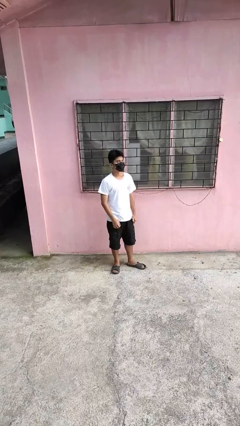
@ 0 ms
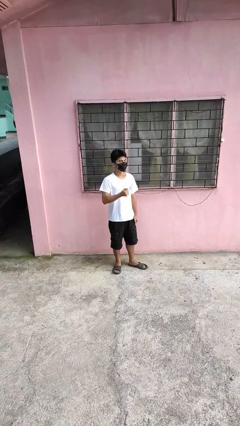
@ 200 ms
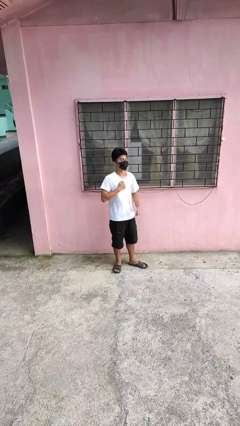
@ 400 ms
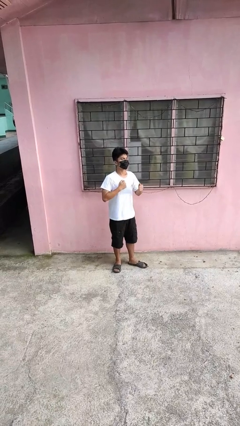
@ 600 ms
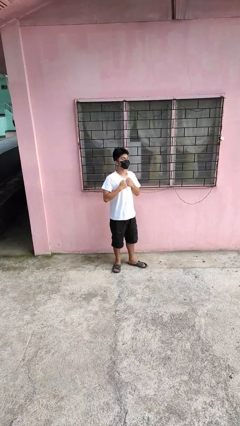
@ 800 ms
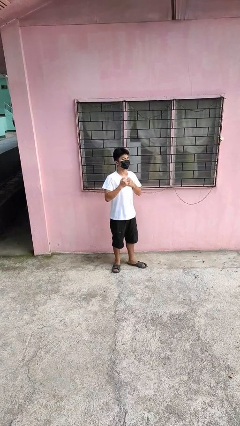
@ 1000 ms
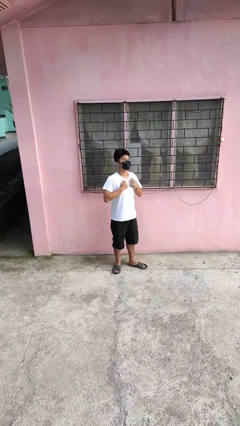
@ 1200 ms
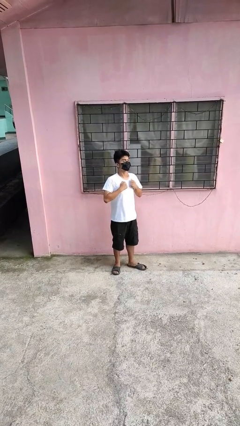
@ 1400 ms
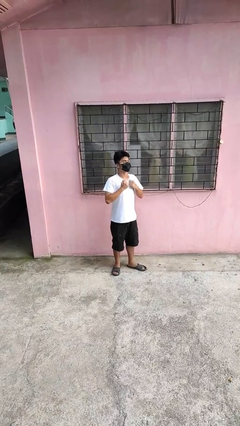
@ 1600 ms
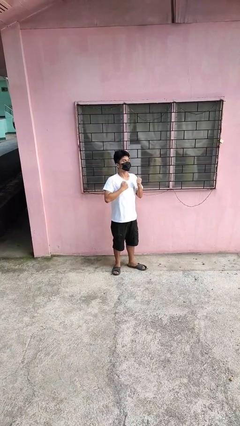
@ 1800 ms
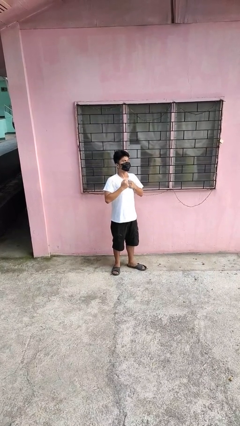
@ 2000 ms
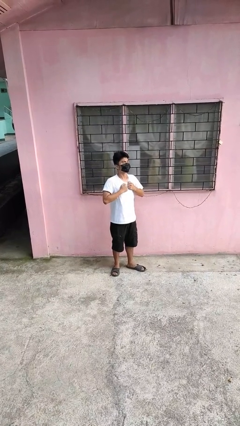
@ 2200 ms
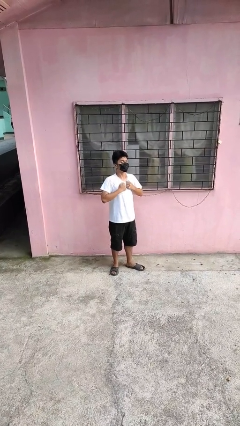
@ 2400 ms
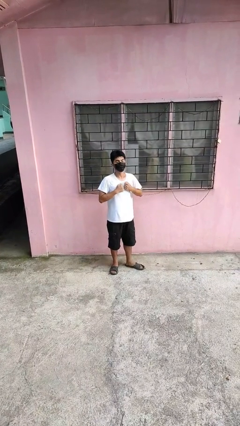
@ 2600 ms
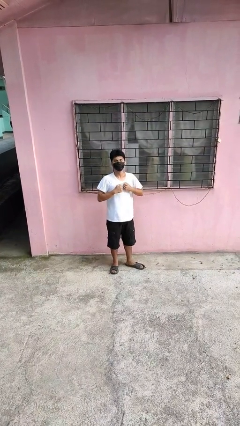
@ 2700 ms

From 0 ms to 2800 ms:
person drums on chest

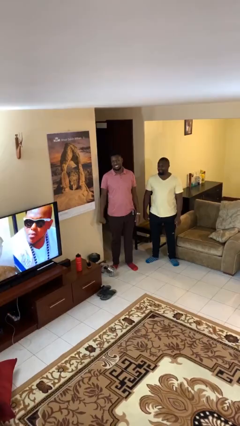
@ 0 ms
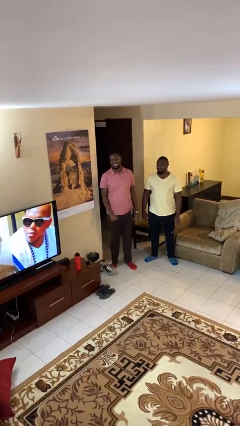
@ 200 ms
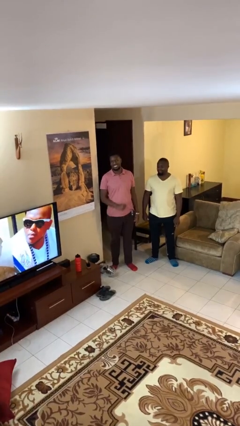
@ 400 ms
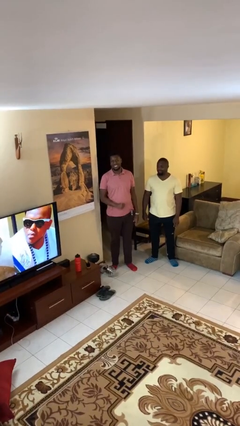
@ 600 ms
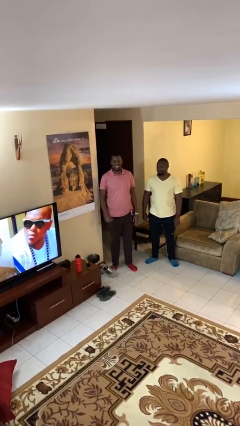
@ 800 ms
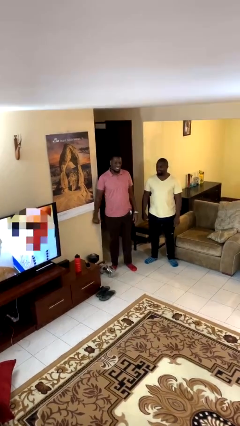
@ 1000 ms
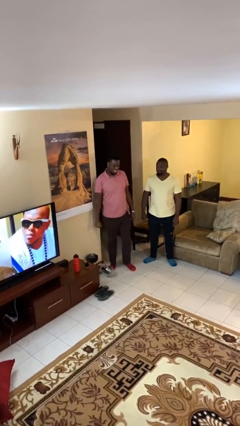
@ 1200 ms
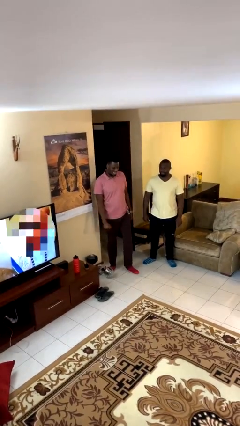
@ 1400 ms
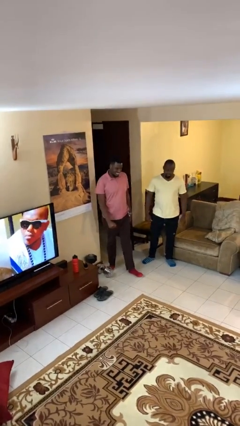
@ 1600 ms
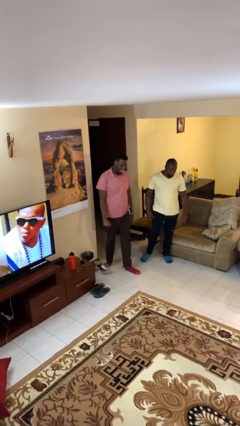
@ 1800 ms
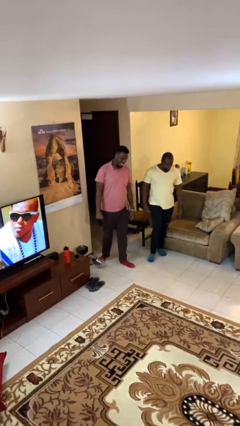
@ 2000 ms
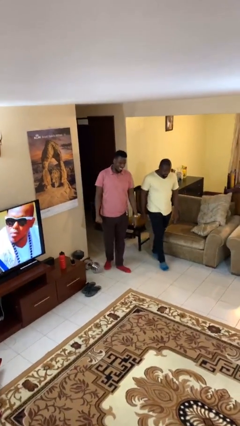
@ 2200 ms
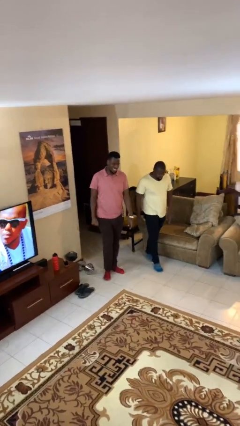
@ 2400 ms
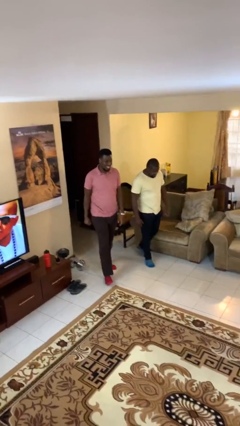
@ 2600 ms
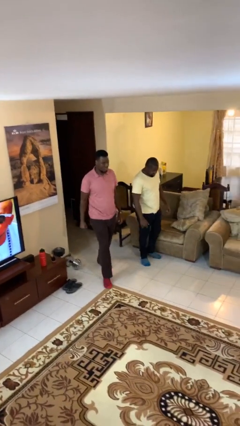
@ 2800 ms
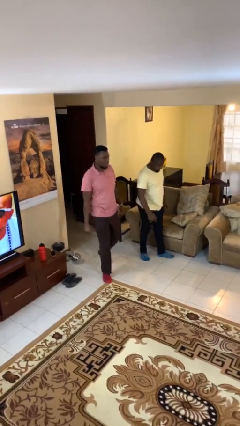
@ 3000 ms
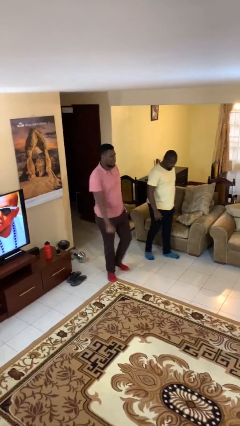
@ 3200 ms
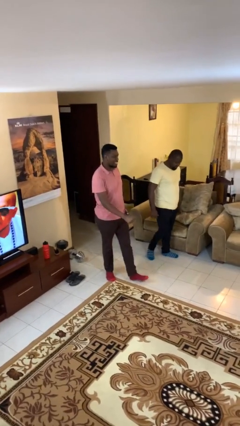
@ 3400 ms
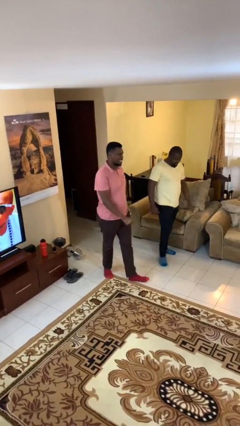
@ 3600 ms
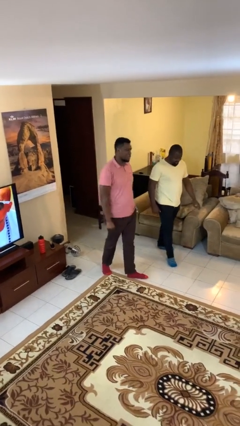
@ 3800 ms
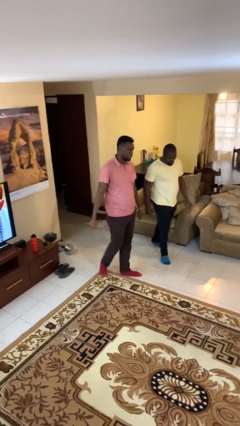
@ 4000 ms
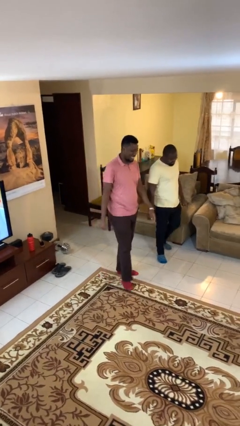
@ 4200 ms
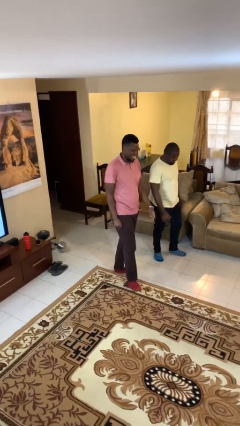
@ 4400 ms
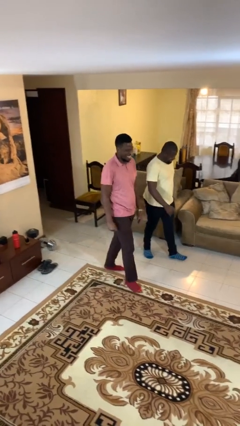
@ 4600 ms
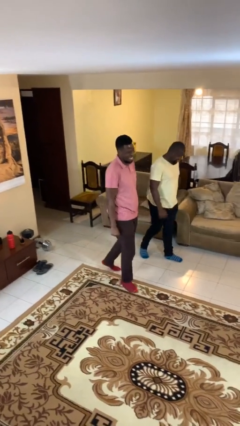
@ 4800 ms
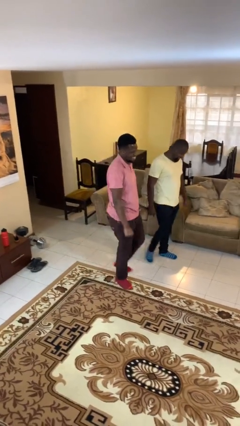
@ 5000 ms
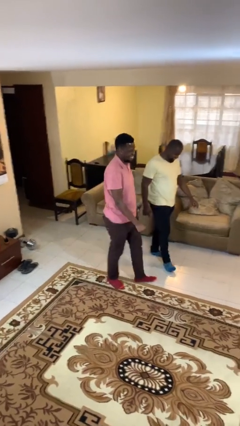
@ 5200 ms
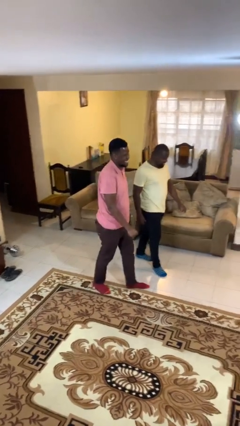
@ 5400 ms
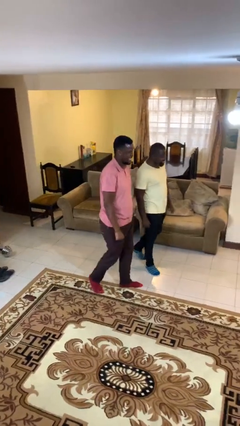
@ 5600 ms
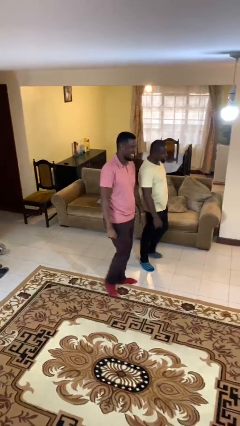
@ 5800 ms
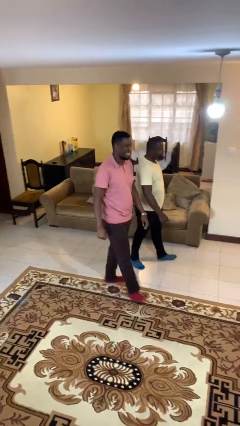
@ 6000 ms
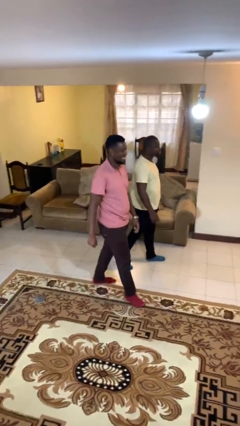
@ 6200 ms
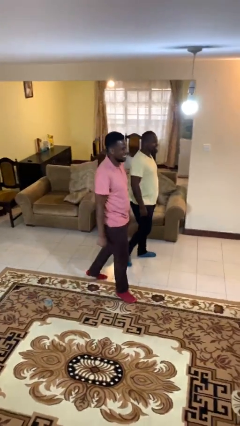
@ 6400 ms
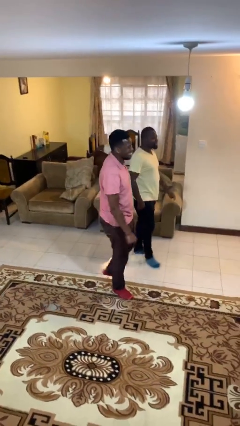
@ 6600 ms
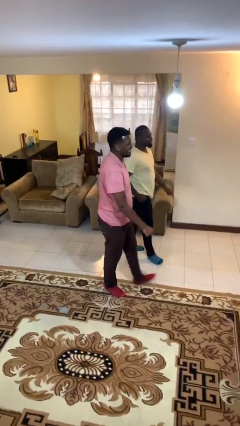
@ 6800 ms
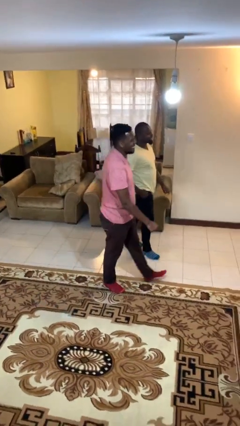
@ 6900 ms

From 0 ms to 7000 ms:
person talks to person

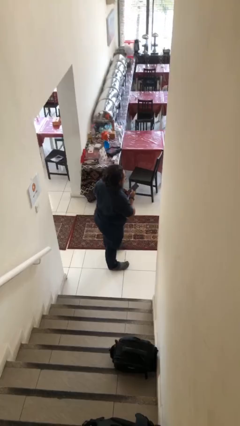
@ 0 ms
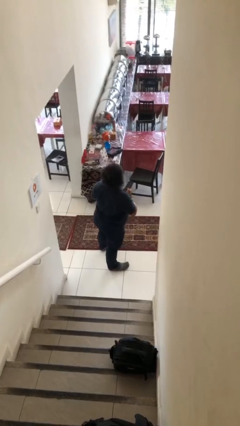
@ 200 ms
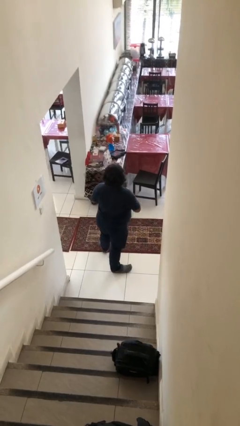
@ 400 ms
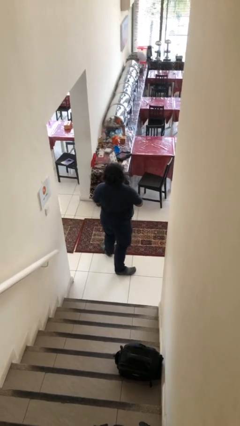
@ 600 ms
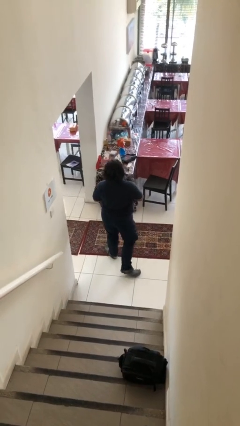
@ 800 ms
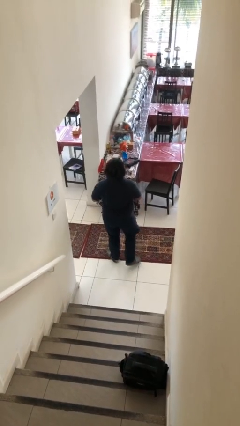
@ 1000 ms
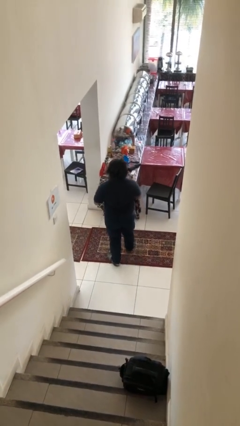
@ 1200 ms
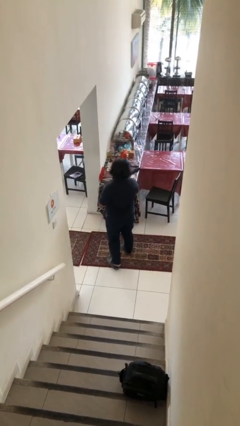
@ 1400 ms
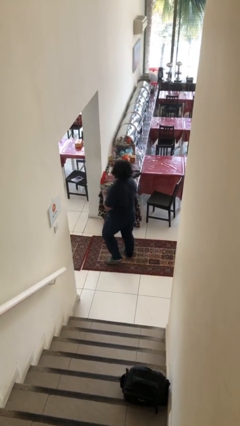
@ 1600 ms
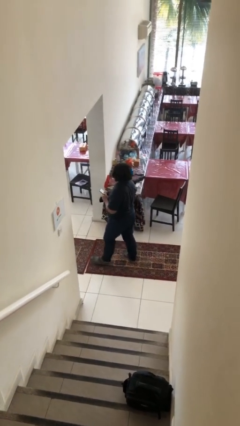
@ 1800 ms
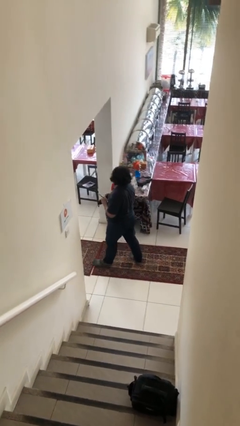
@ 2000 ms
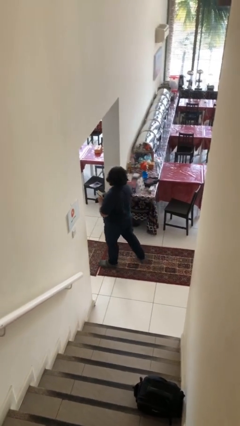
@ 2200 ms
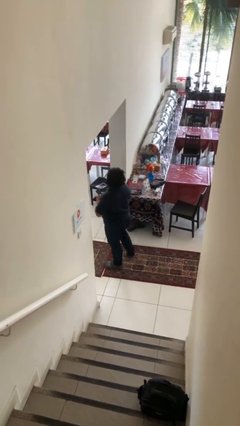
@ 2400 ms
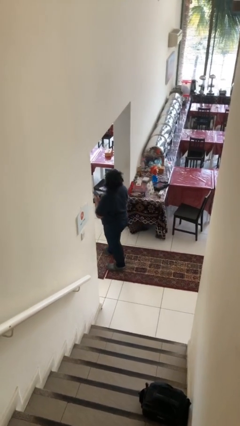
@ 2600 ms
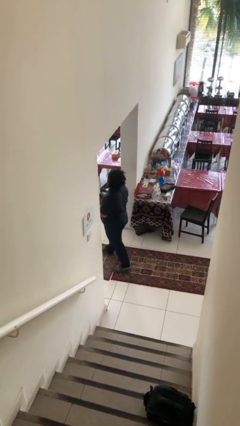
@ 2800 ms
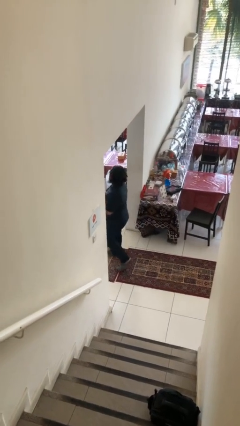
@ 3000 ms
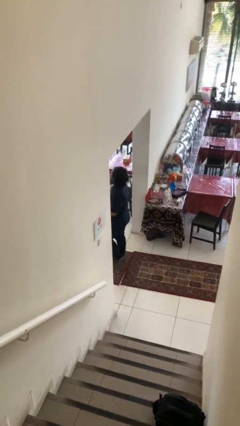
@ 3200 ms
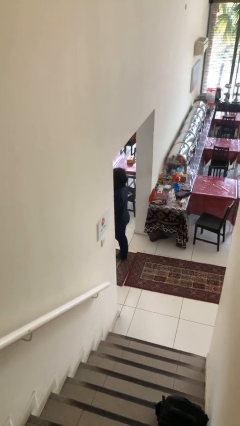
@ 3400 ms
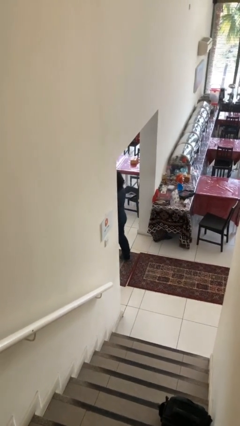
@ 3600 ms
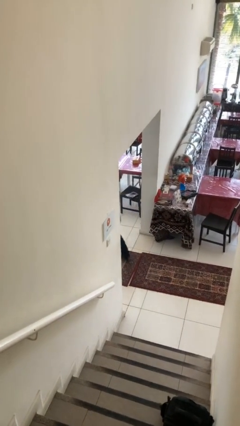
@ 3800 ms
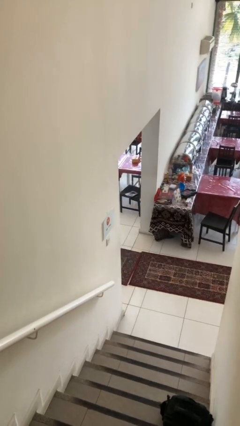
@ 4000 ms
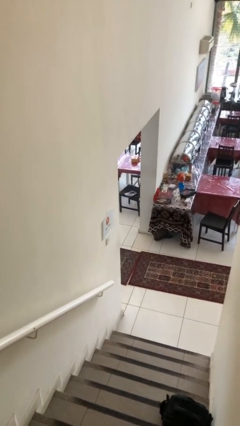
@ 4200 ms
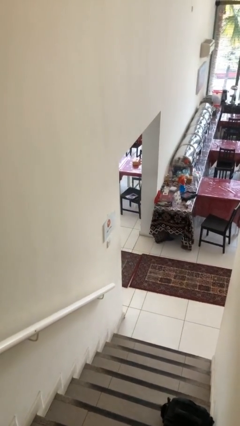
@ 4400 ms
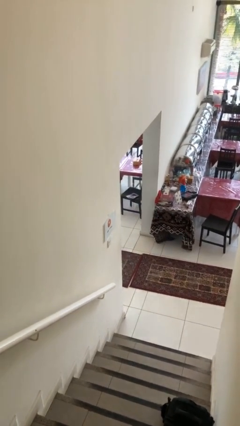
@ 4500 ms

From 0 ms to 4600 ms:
person exits scene through structure

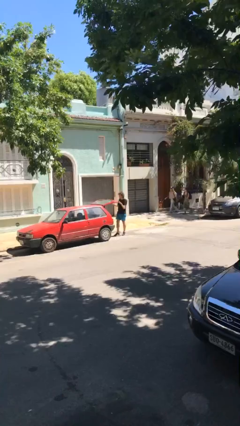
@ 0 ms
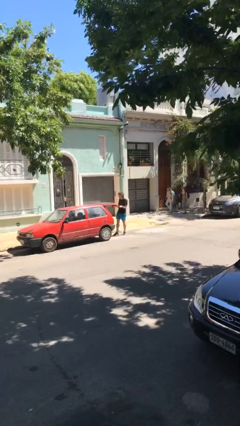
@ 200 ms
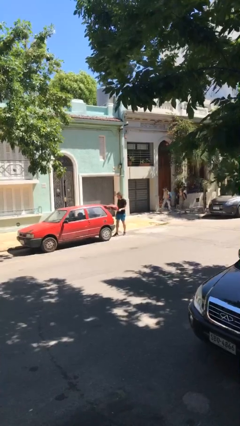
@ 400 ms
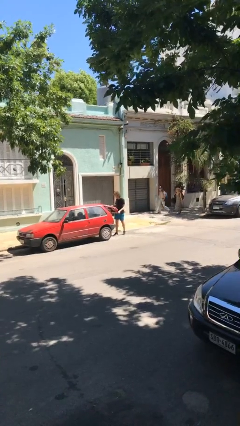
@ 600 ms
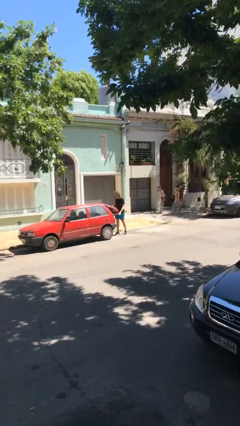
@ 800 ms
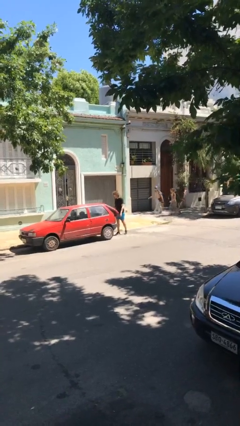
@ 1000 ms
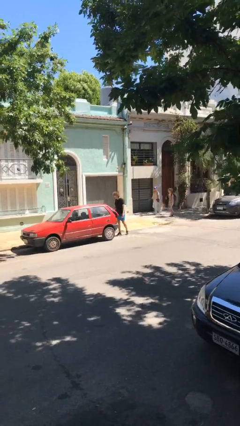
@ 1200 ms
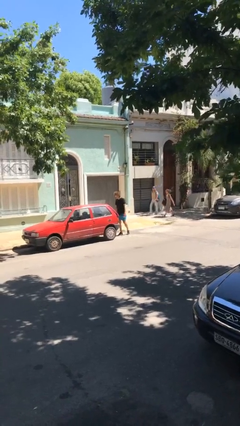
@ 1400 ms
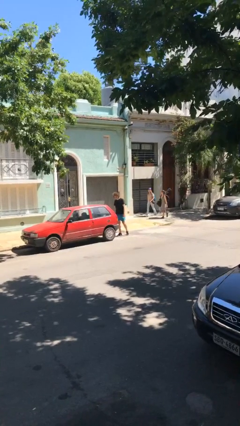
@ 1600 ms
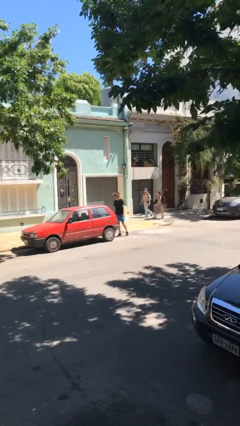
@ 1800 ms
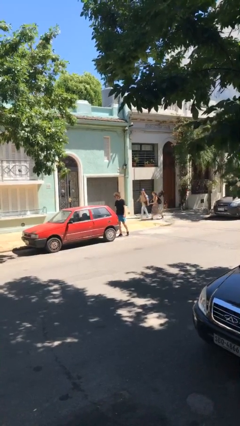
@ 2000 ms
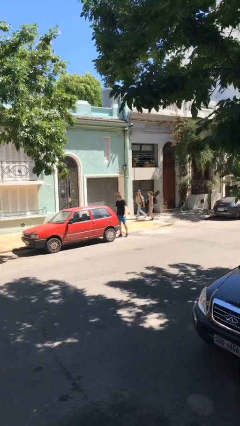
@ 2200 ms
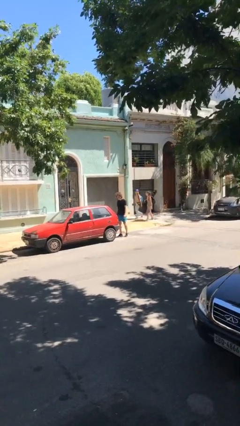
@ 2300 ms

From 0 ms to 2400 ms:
person closes car trunk

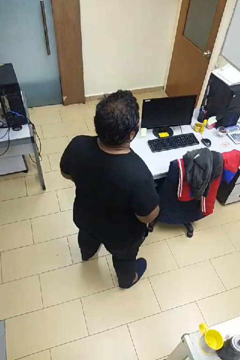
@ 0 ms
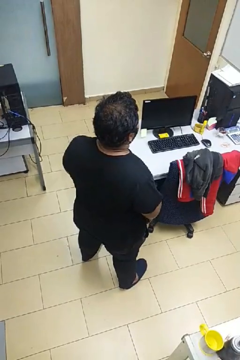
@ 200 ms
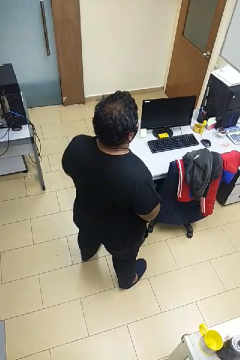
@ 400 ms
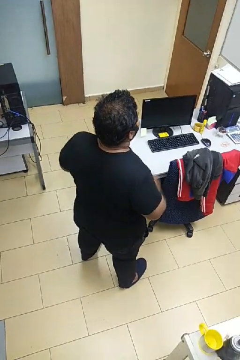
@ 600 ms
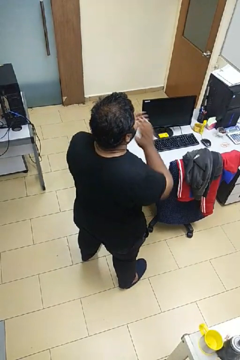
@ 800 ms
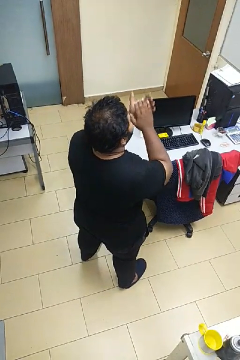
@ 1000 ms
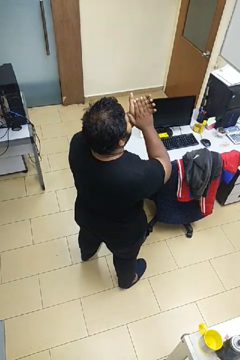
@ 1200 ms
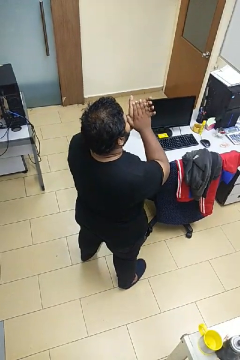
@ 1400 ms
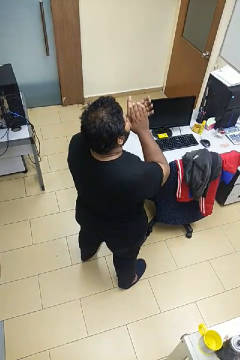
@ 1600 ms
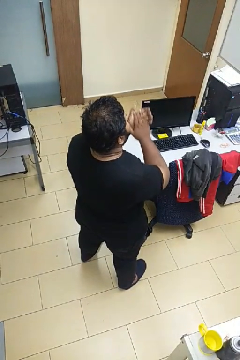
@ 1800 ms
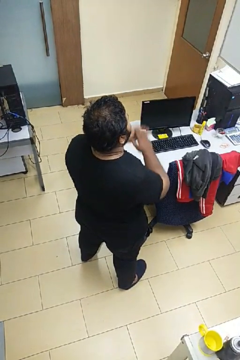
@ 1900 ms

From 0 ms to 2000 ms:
person claps hands
